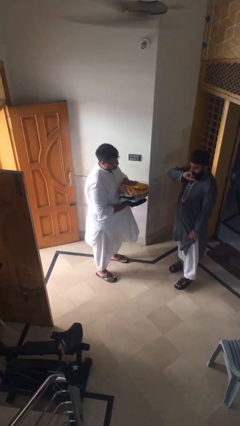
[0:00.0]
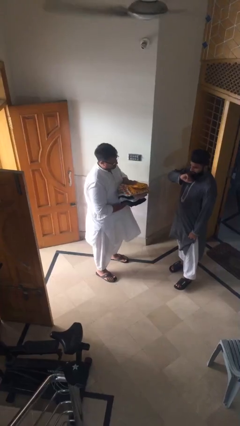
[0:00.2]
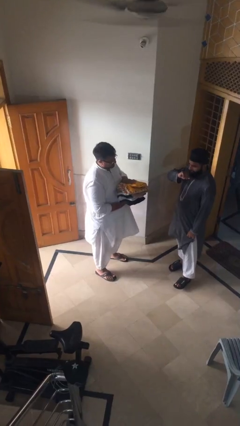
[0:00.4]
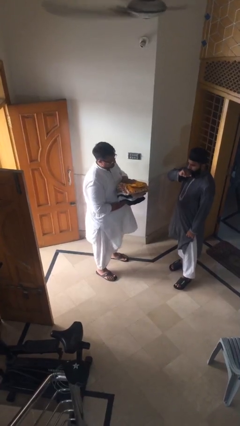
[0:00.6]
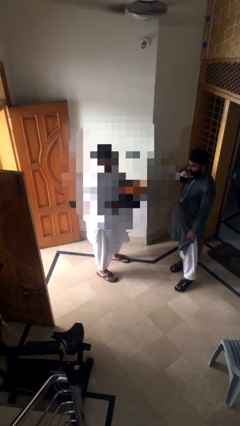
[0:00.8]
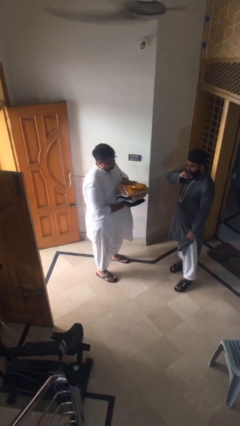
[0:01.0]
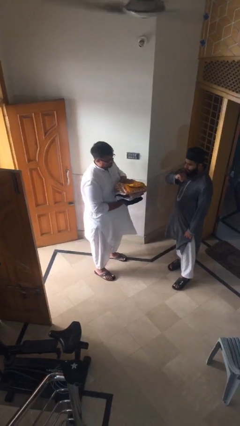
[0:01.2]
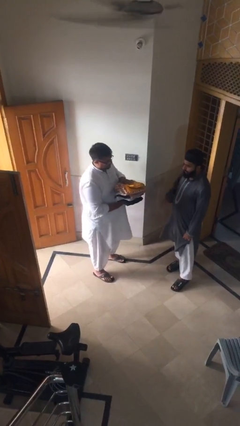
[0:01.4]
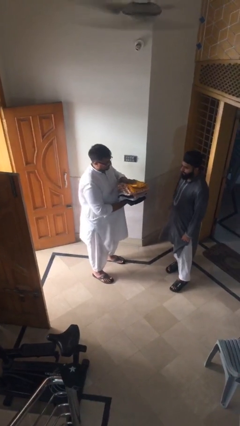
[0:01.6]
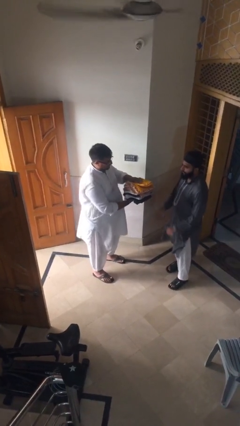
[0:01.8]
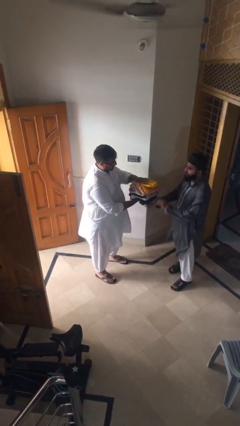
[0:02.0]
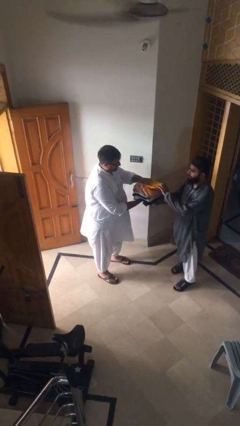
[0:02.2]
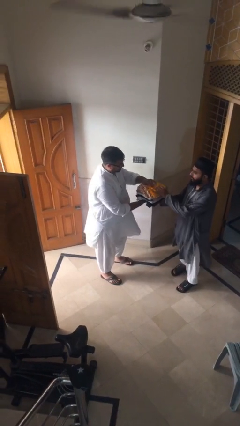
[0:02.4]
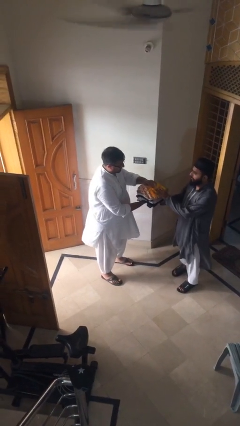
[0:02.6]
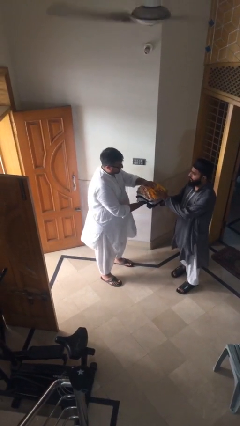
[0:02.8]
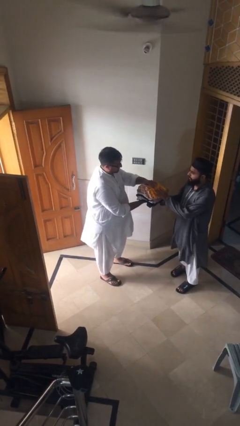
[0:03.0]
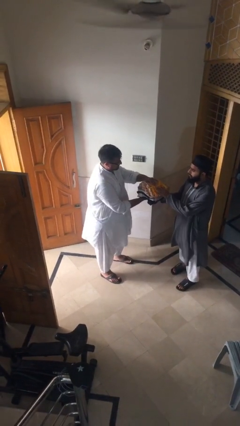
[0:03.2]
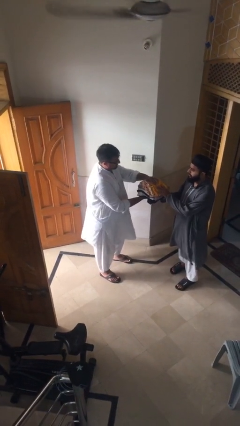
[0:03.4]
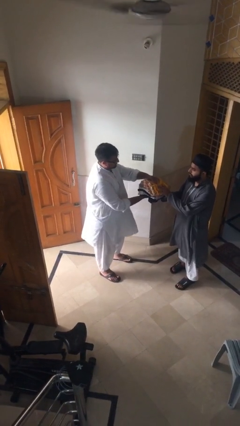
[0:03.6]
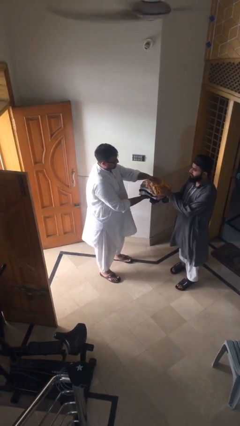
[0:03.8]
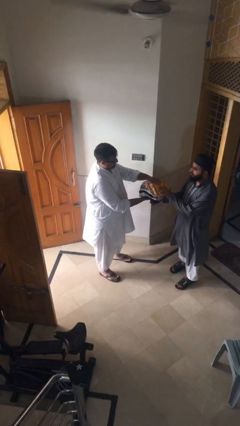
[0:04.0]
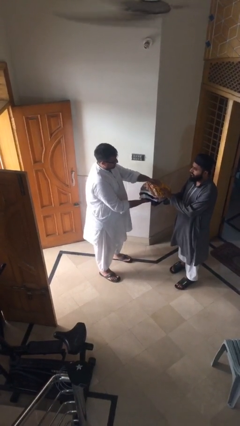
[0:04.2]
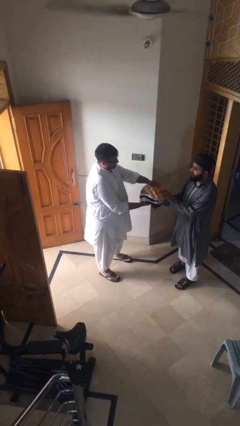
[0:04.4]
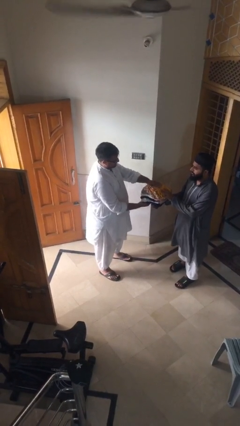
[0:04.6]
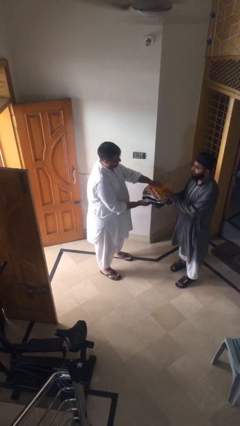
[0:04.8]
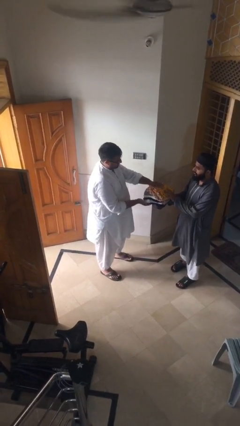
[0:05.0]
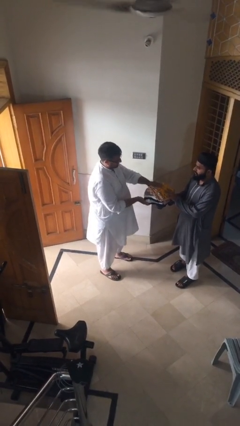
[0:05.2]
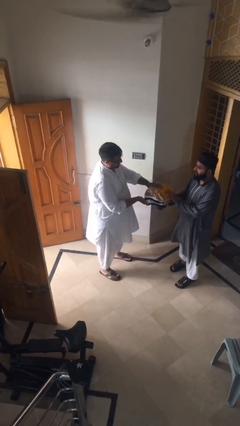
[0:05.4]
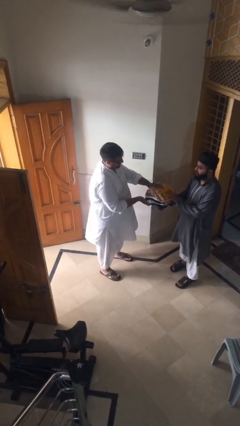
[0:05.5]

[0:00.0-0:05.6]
person transfers object to person

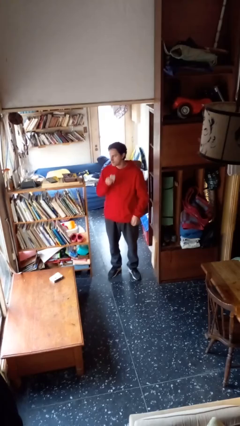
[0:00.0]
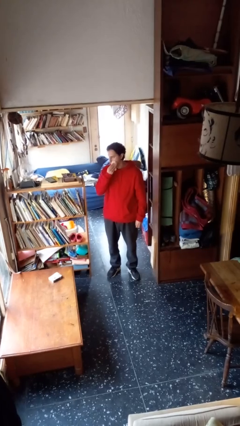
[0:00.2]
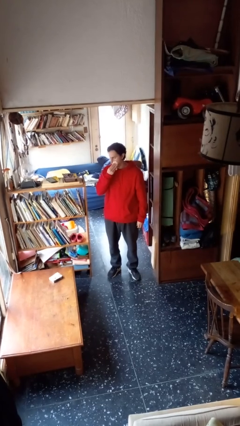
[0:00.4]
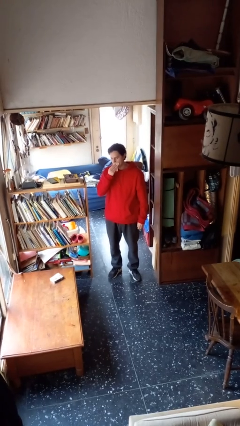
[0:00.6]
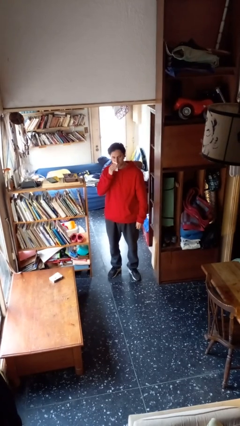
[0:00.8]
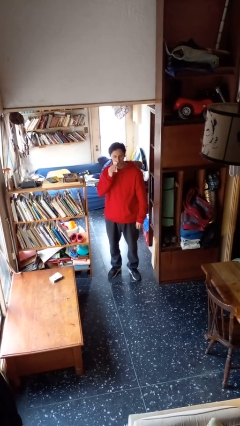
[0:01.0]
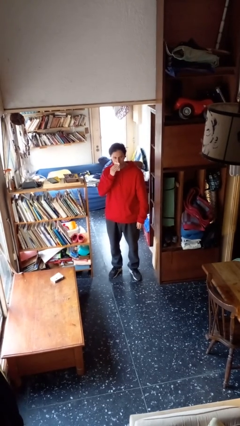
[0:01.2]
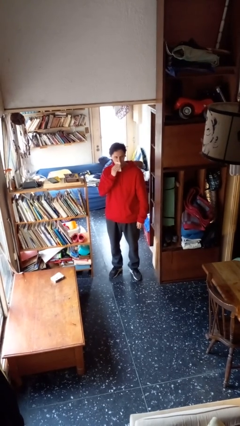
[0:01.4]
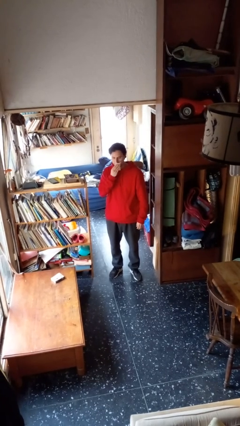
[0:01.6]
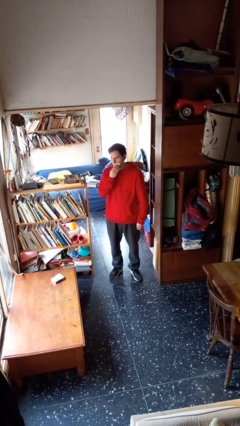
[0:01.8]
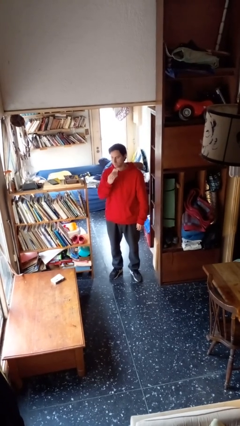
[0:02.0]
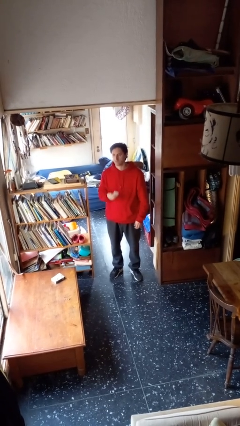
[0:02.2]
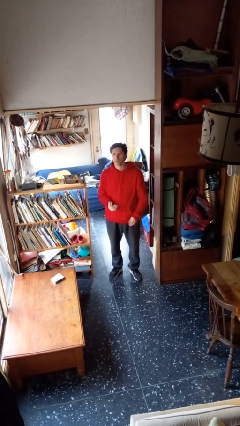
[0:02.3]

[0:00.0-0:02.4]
person wipes mouth with napkin

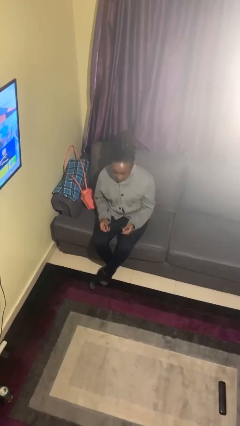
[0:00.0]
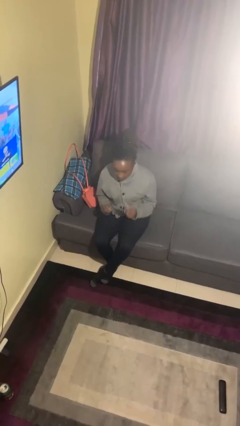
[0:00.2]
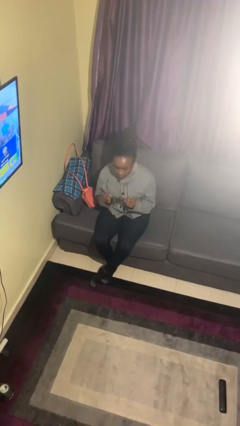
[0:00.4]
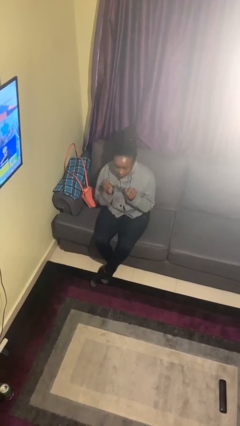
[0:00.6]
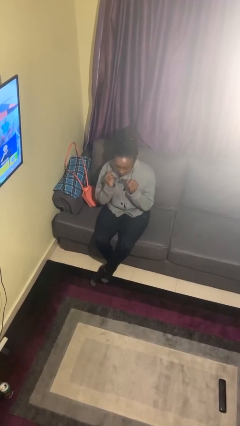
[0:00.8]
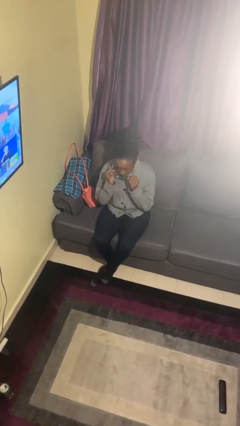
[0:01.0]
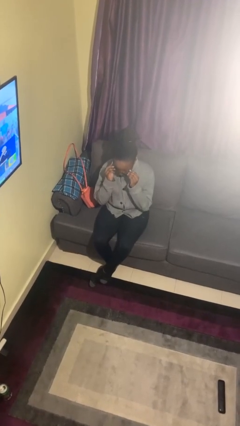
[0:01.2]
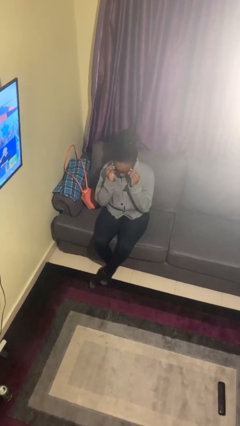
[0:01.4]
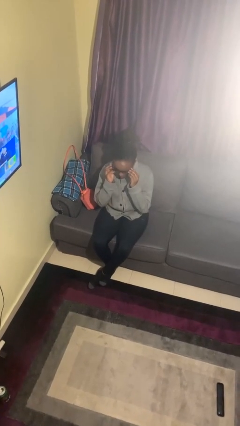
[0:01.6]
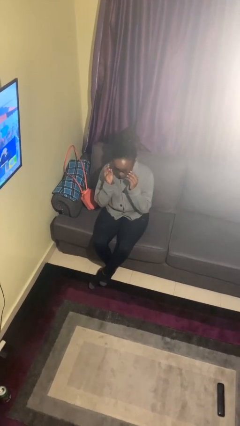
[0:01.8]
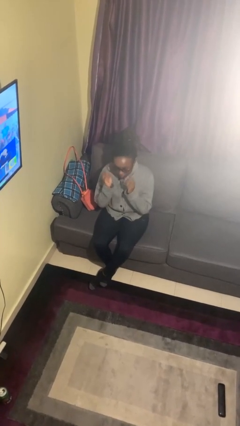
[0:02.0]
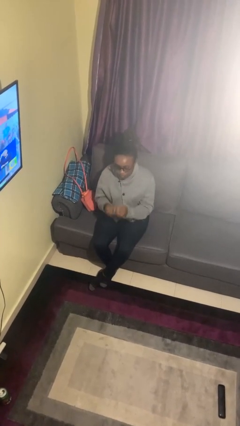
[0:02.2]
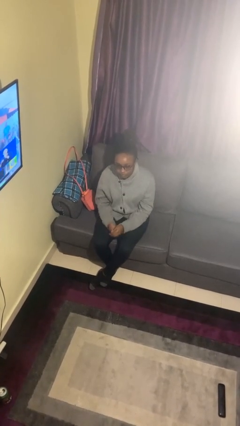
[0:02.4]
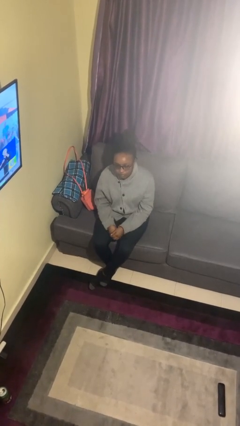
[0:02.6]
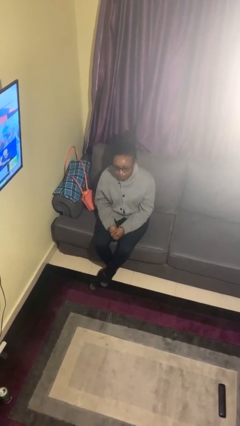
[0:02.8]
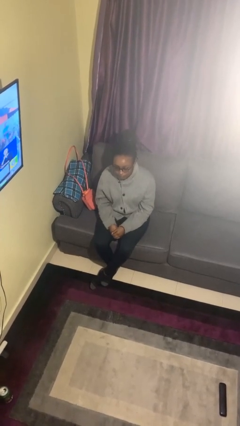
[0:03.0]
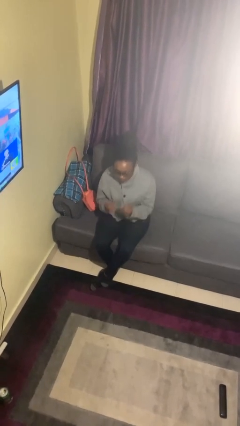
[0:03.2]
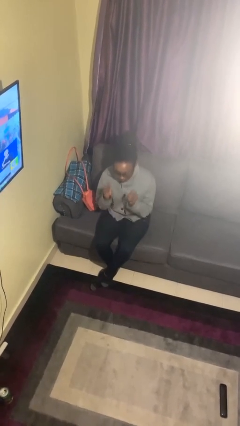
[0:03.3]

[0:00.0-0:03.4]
person puts on glasses

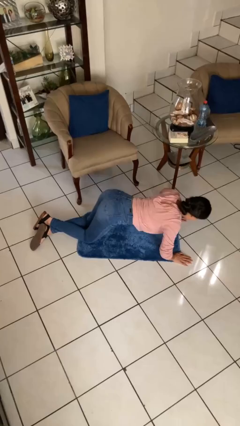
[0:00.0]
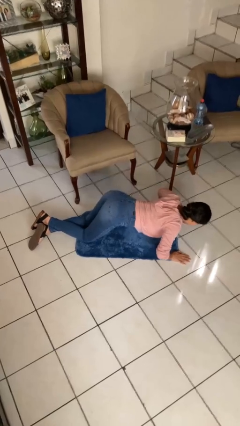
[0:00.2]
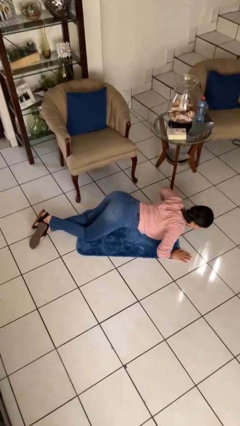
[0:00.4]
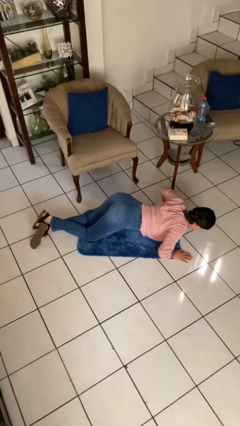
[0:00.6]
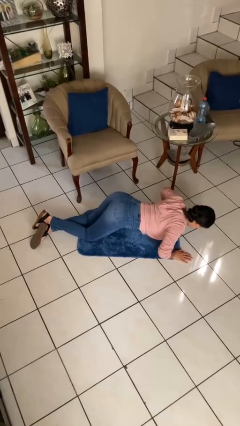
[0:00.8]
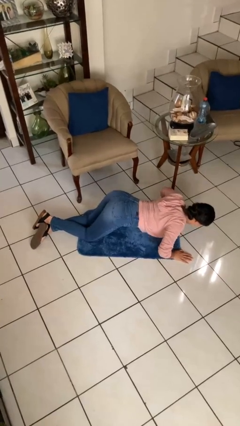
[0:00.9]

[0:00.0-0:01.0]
person exercises with pushup

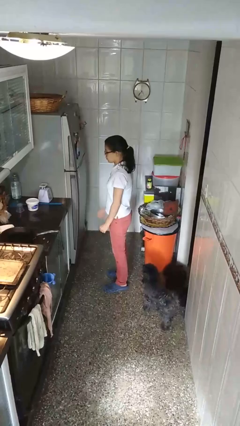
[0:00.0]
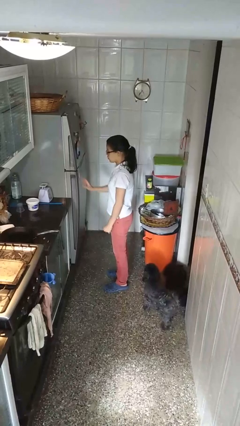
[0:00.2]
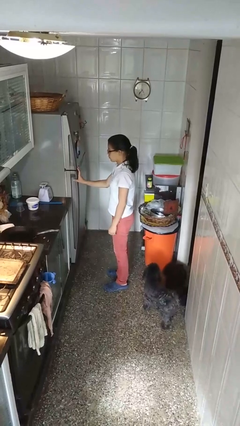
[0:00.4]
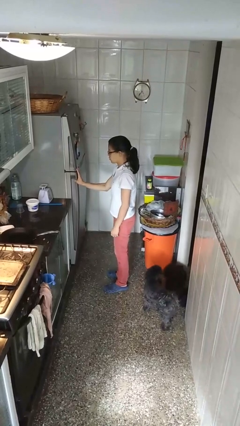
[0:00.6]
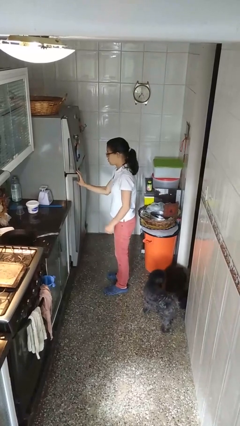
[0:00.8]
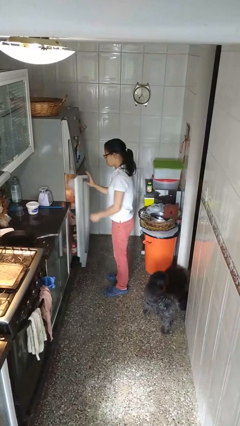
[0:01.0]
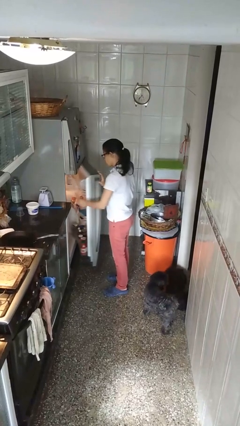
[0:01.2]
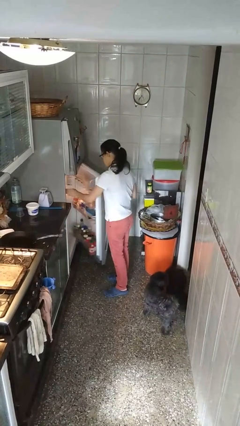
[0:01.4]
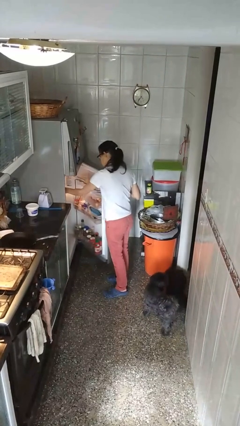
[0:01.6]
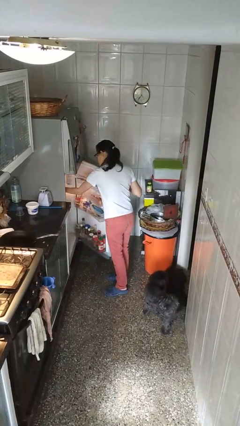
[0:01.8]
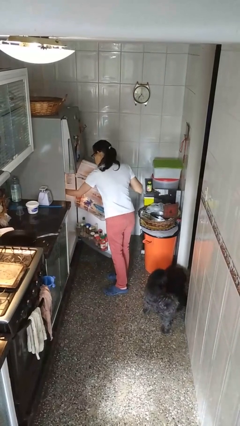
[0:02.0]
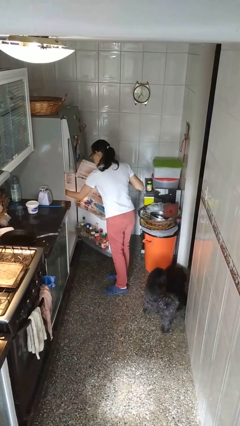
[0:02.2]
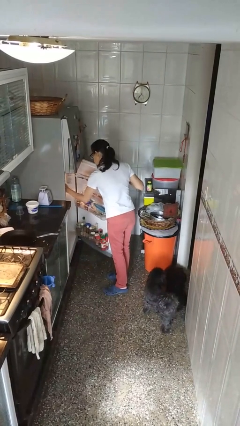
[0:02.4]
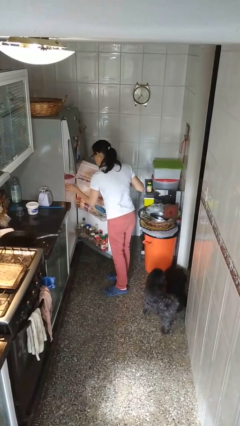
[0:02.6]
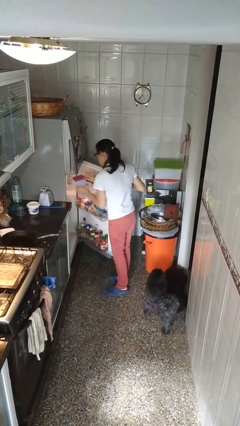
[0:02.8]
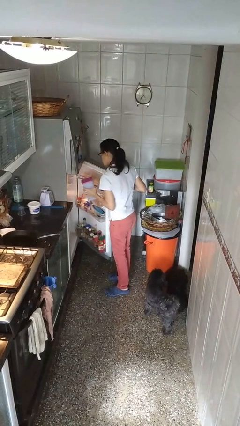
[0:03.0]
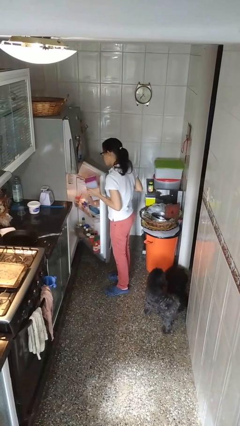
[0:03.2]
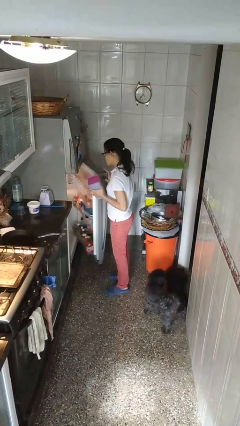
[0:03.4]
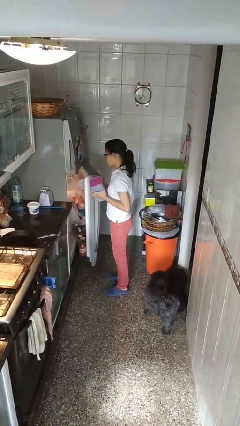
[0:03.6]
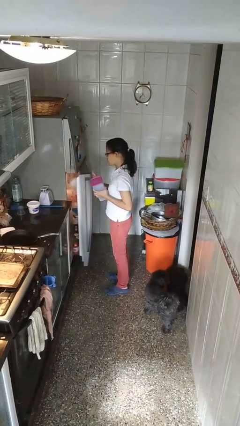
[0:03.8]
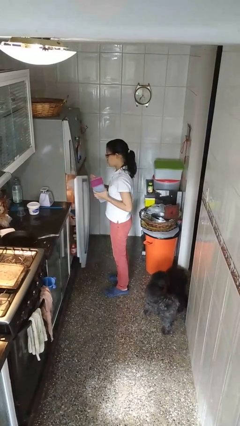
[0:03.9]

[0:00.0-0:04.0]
person takes object from refrigerator

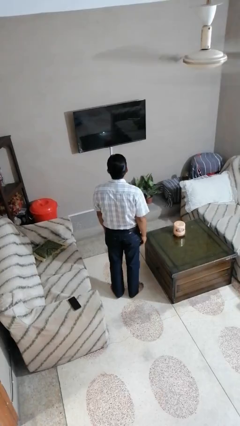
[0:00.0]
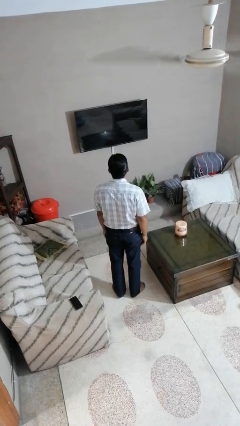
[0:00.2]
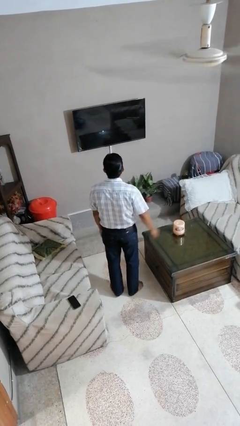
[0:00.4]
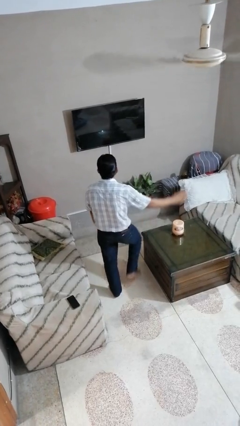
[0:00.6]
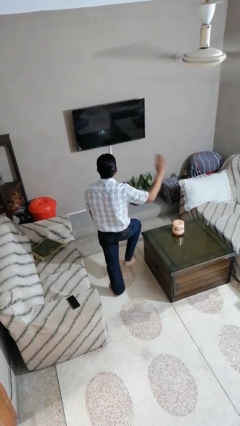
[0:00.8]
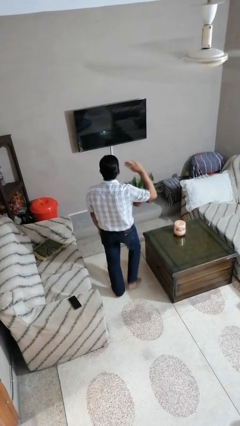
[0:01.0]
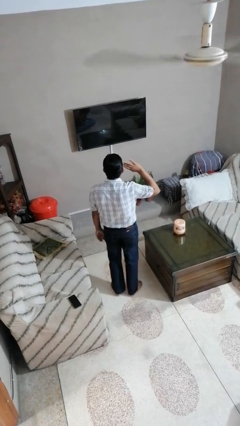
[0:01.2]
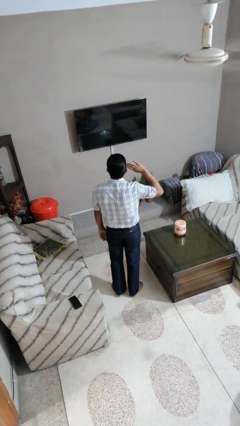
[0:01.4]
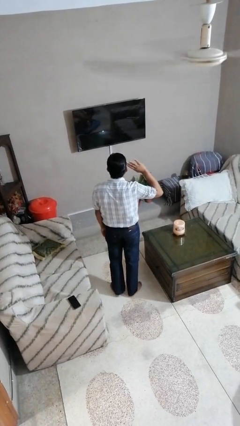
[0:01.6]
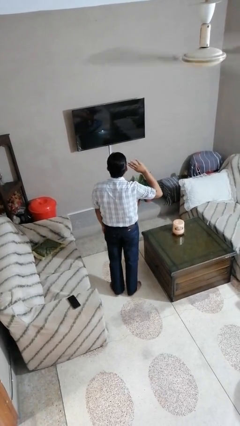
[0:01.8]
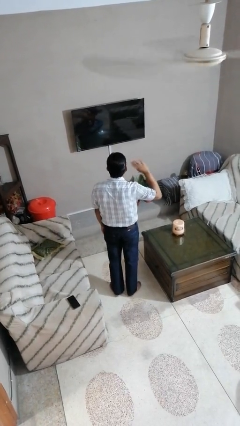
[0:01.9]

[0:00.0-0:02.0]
person salutes
